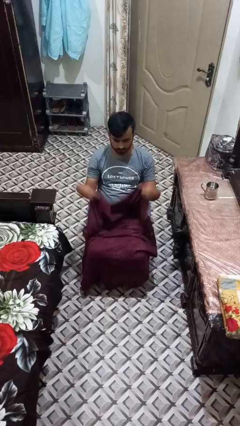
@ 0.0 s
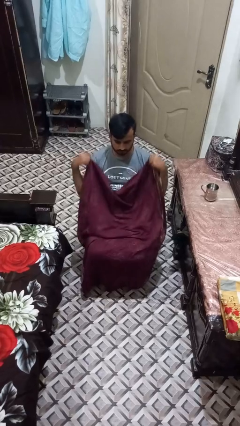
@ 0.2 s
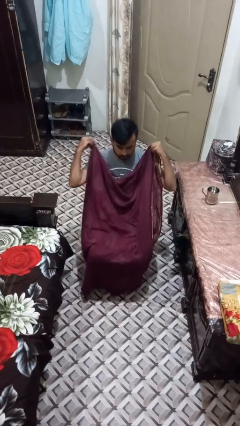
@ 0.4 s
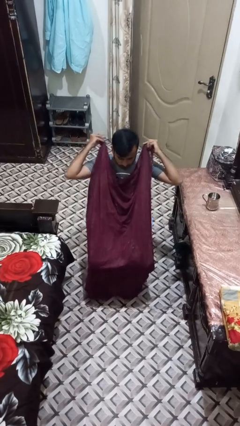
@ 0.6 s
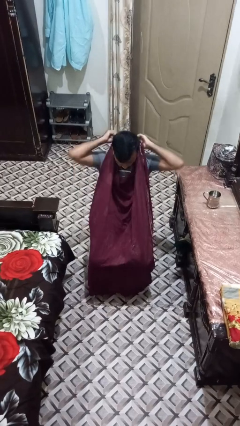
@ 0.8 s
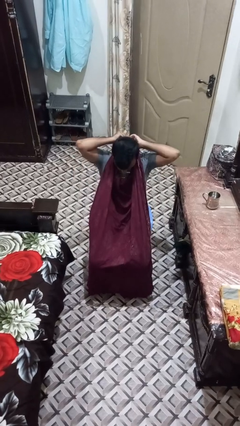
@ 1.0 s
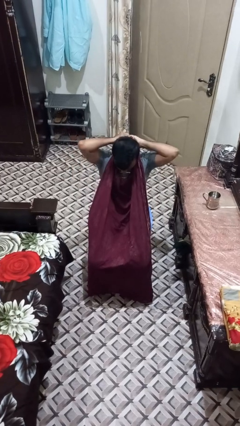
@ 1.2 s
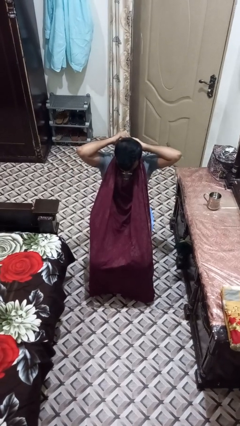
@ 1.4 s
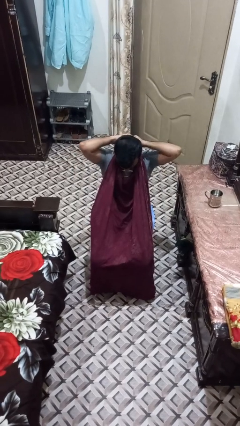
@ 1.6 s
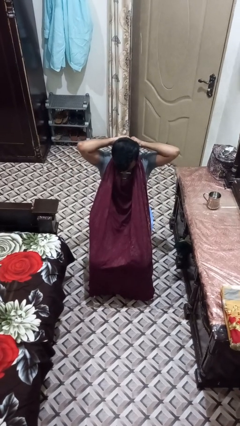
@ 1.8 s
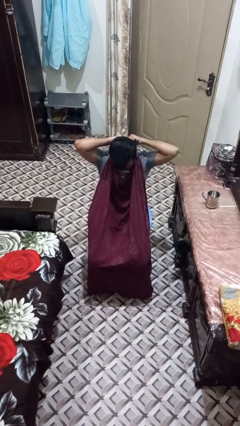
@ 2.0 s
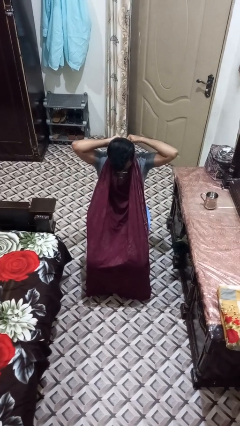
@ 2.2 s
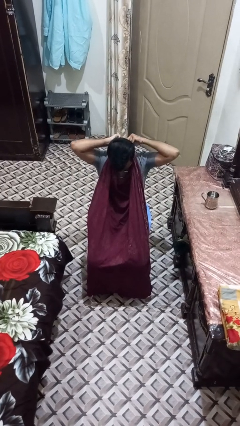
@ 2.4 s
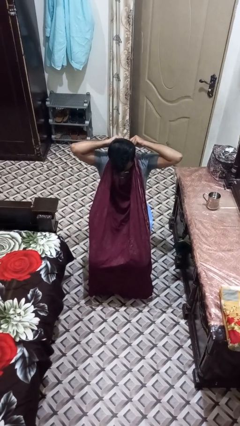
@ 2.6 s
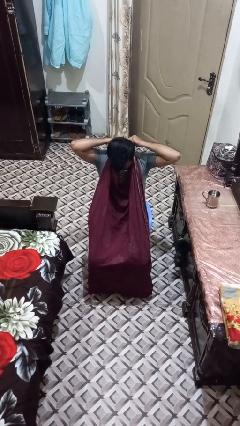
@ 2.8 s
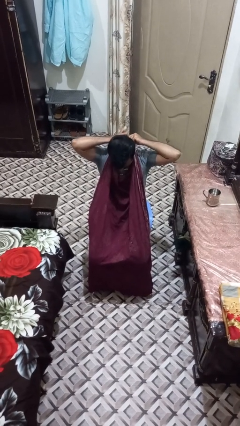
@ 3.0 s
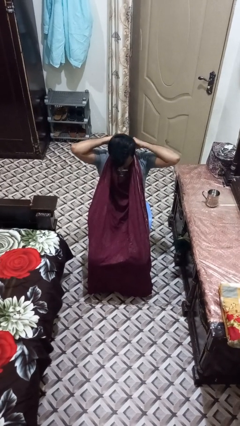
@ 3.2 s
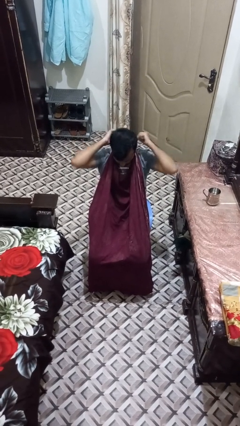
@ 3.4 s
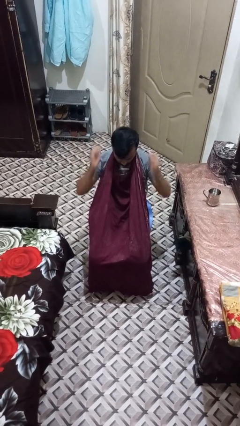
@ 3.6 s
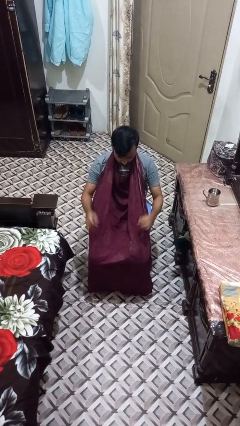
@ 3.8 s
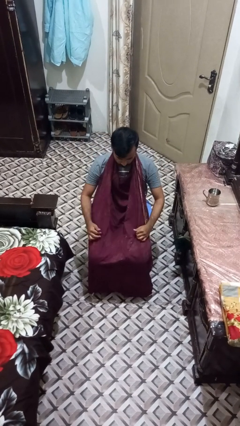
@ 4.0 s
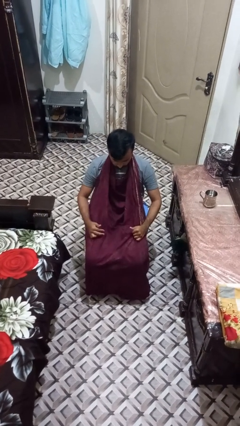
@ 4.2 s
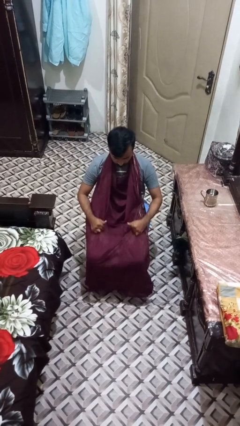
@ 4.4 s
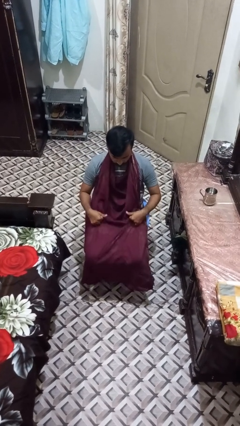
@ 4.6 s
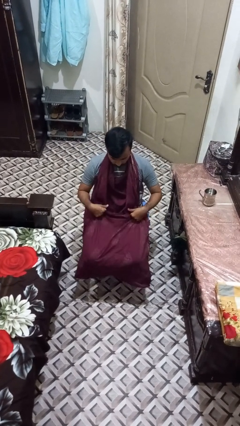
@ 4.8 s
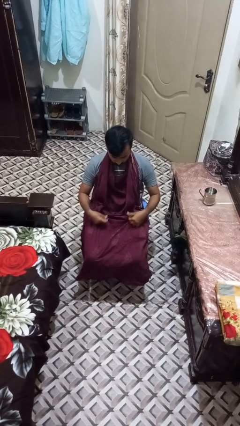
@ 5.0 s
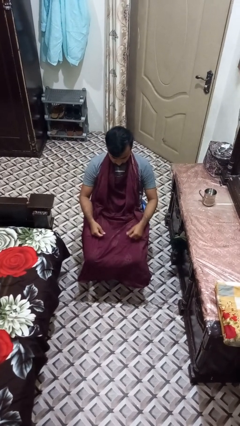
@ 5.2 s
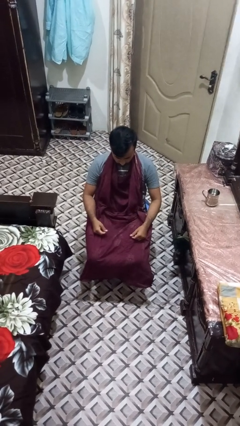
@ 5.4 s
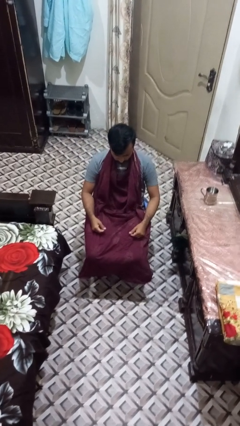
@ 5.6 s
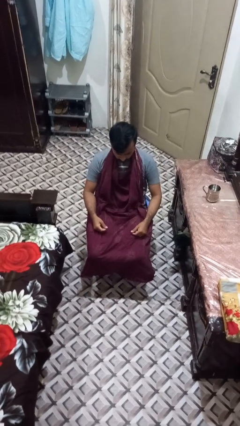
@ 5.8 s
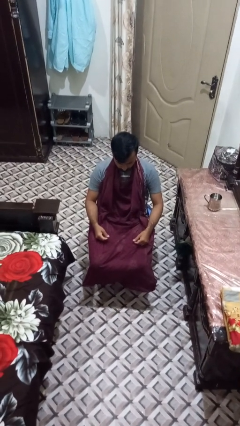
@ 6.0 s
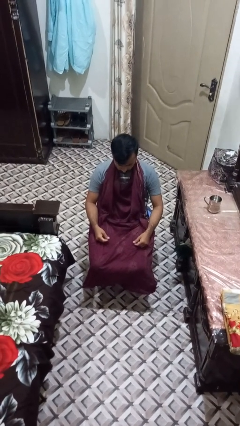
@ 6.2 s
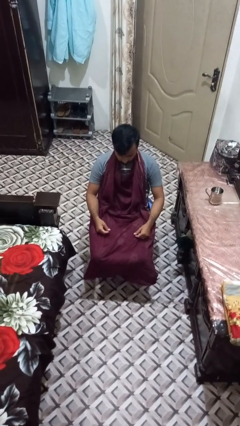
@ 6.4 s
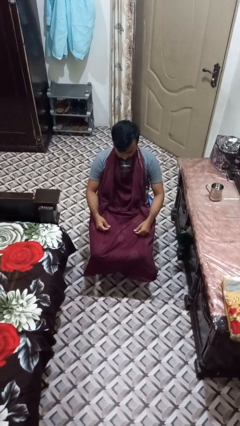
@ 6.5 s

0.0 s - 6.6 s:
person puts on apron

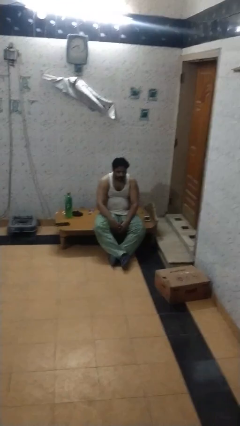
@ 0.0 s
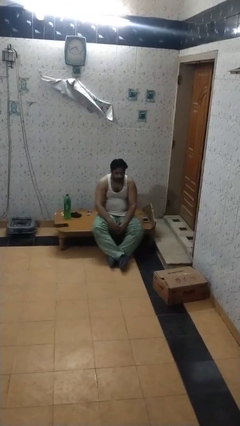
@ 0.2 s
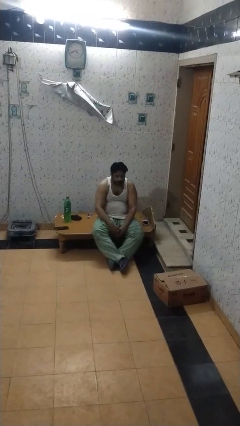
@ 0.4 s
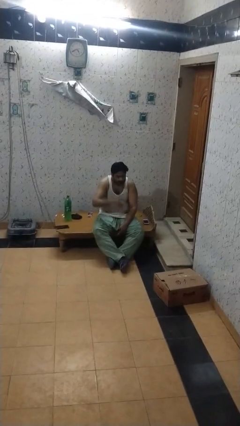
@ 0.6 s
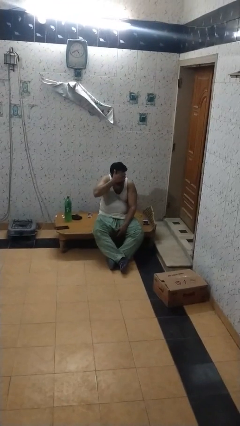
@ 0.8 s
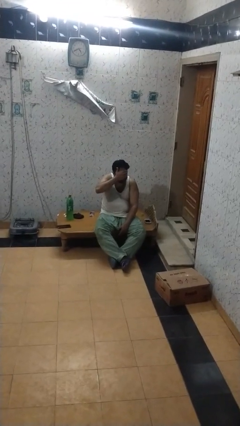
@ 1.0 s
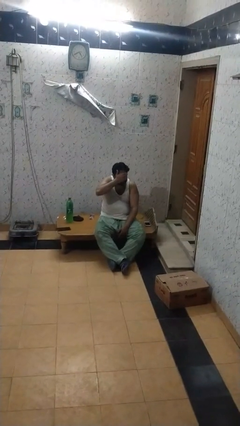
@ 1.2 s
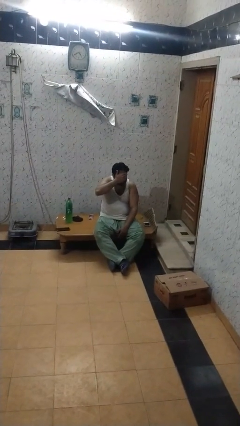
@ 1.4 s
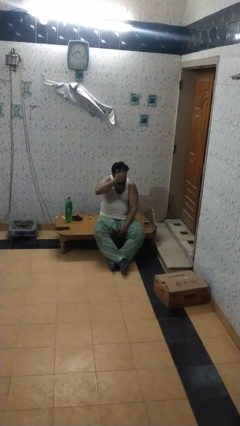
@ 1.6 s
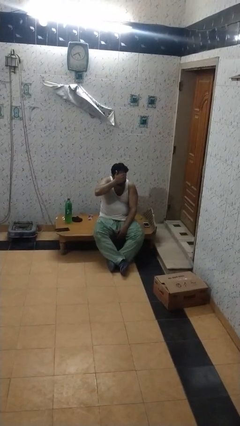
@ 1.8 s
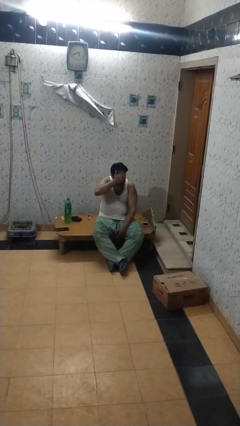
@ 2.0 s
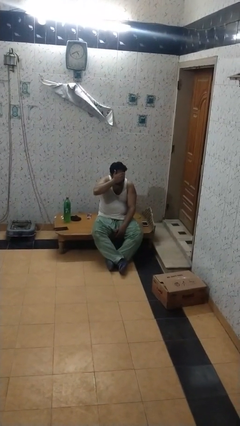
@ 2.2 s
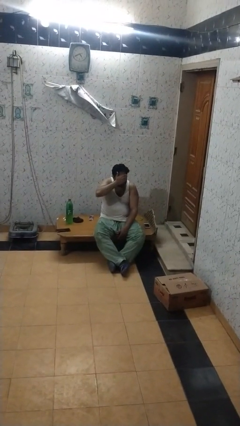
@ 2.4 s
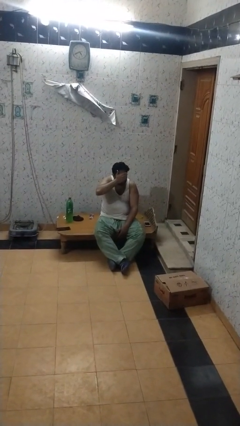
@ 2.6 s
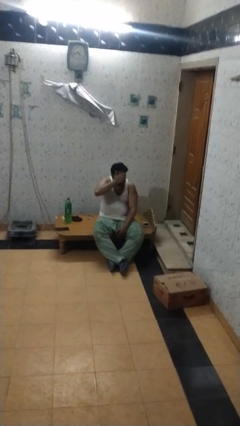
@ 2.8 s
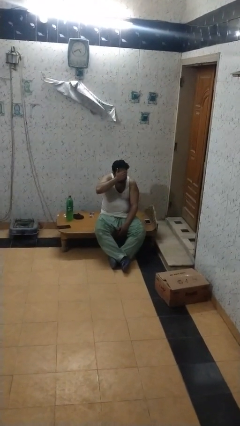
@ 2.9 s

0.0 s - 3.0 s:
person covers face with hands

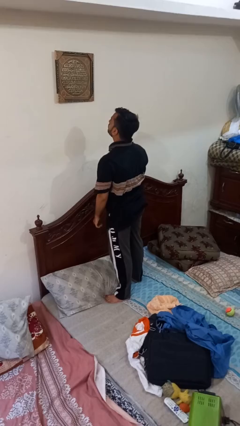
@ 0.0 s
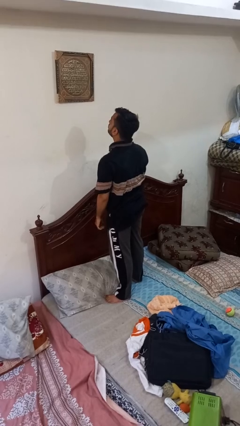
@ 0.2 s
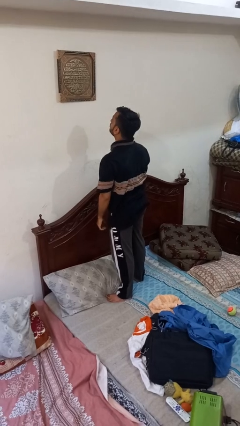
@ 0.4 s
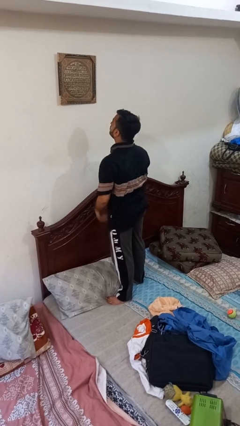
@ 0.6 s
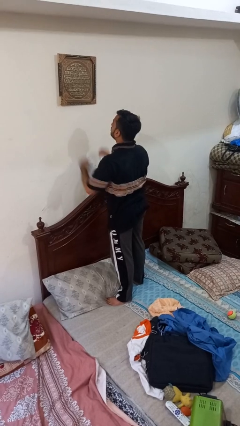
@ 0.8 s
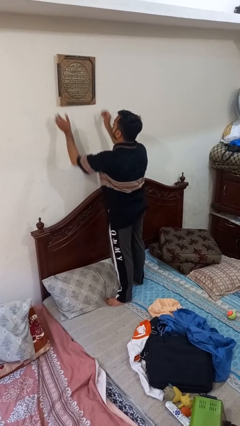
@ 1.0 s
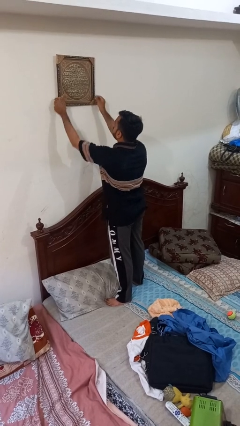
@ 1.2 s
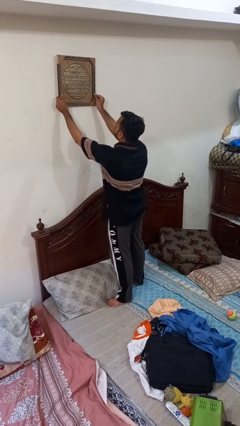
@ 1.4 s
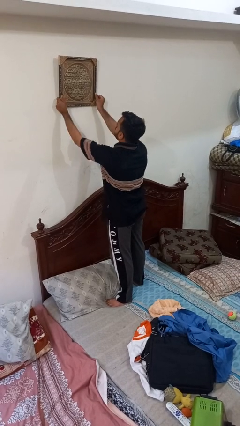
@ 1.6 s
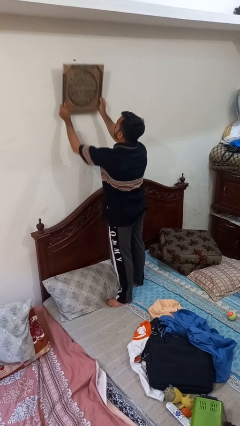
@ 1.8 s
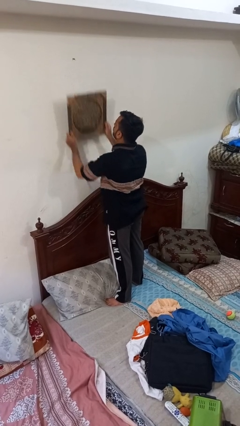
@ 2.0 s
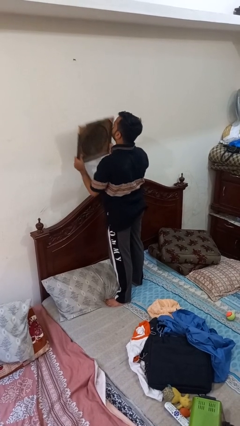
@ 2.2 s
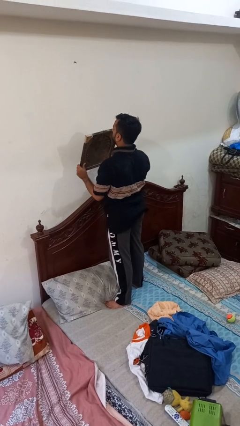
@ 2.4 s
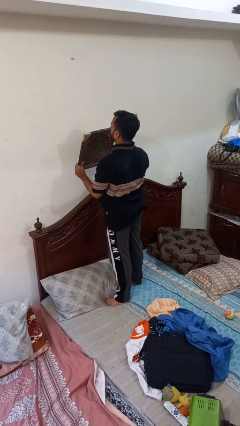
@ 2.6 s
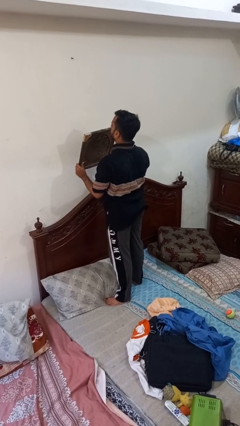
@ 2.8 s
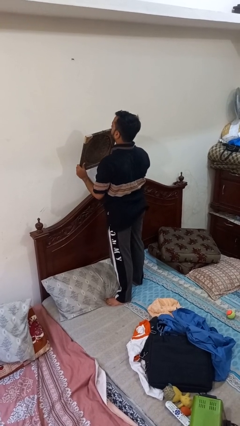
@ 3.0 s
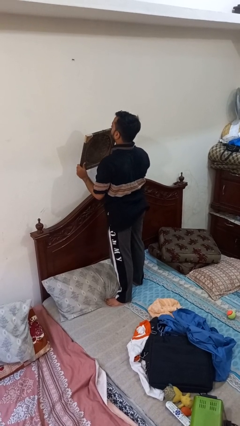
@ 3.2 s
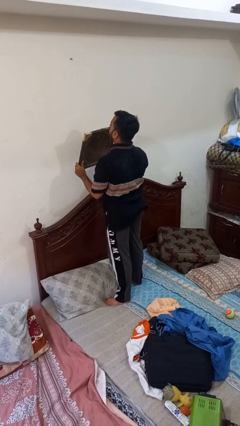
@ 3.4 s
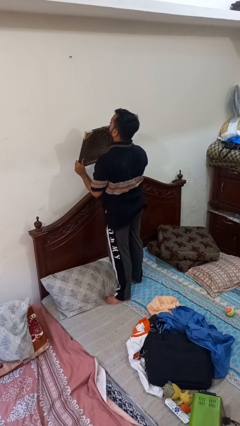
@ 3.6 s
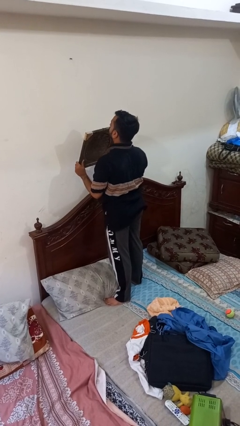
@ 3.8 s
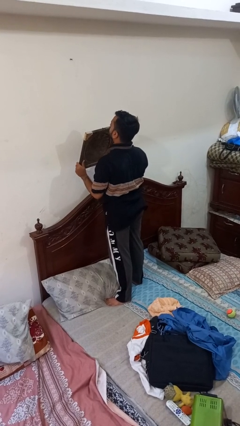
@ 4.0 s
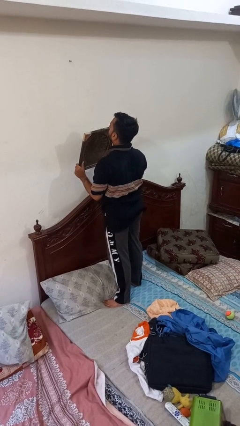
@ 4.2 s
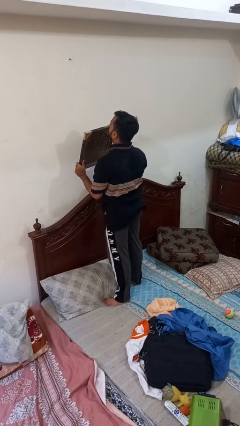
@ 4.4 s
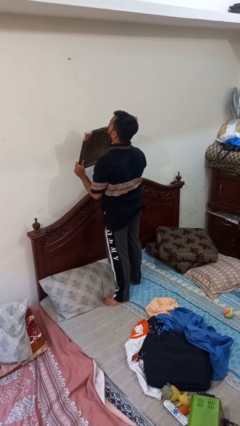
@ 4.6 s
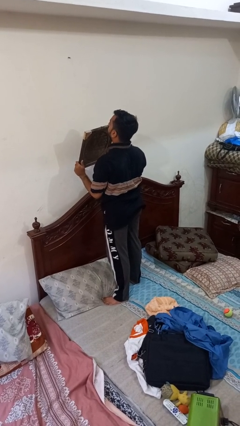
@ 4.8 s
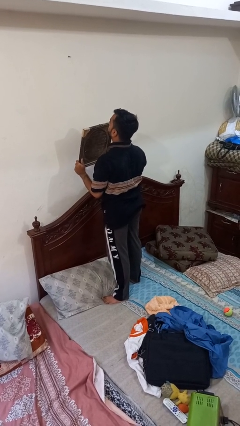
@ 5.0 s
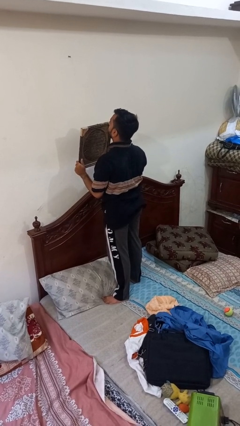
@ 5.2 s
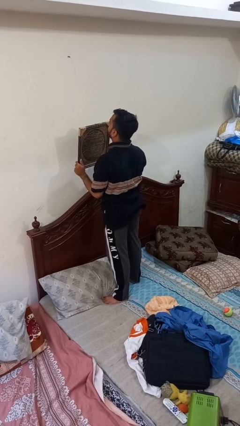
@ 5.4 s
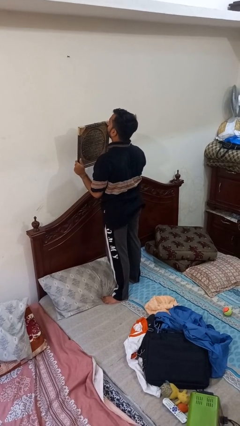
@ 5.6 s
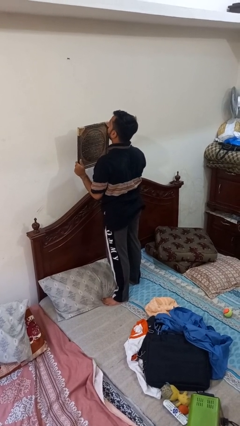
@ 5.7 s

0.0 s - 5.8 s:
person takes down picture frame

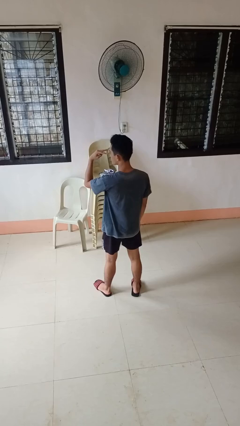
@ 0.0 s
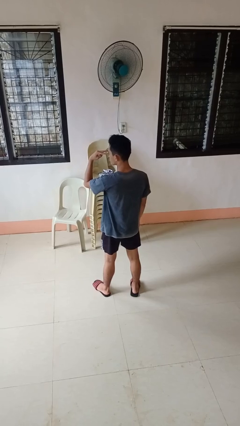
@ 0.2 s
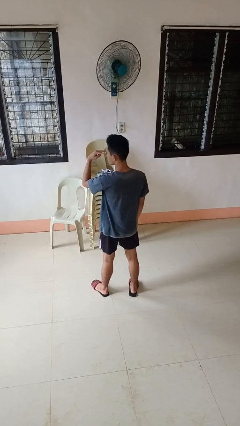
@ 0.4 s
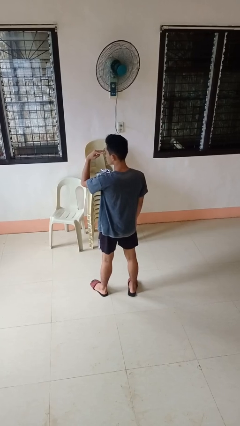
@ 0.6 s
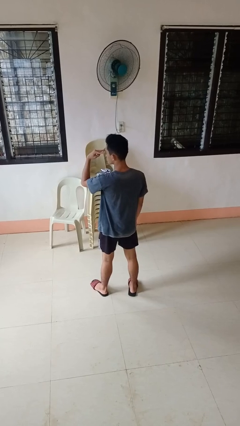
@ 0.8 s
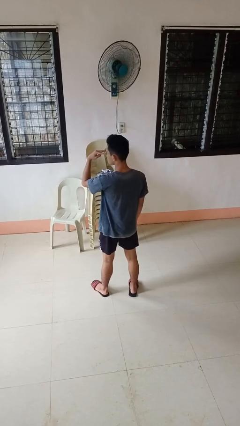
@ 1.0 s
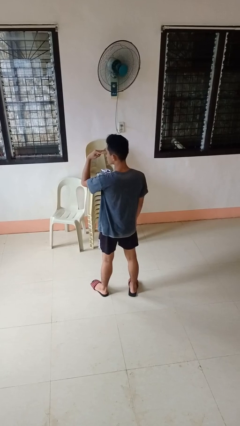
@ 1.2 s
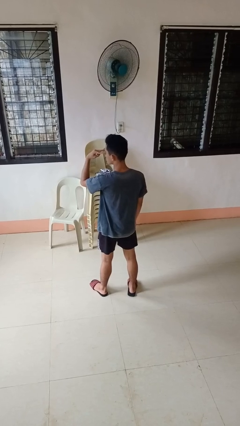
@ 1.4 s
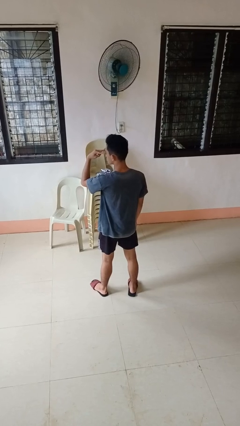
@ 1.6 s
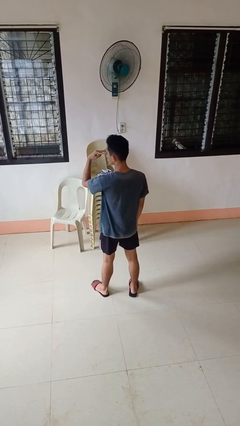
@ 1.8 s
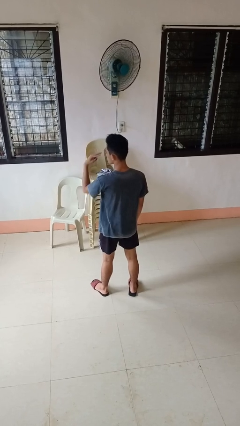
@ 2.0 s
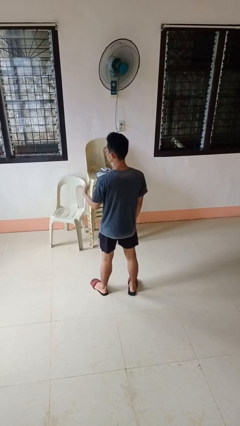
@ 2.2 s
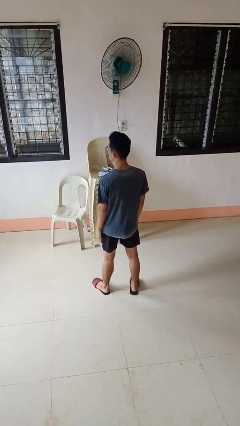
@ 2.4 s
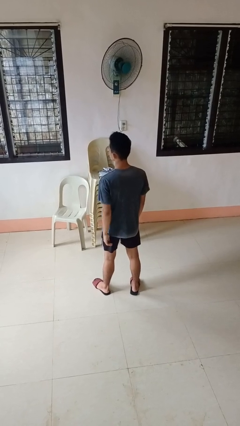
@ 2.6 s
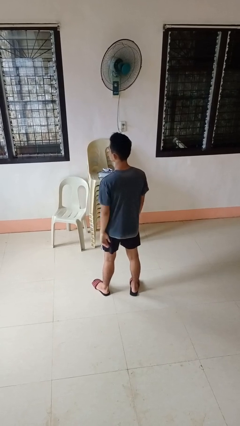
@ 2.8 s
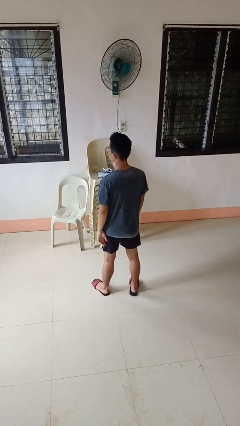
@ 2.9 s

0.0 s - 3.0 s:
person gestures watch closely
